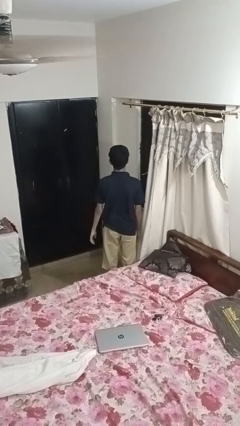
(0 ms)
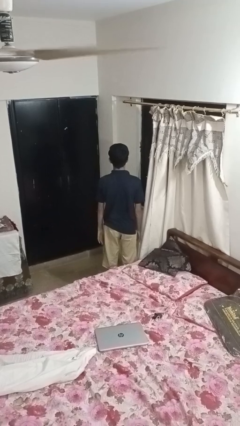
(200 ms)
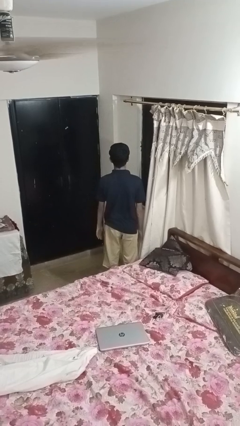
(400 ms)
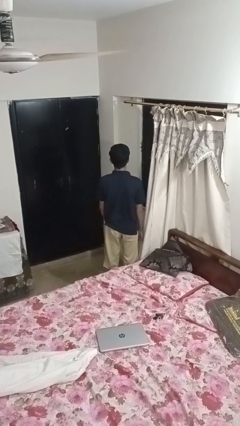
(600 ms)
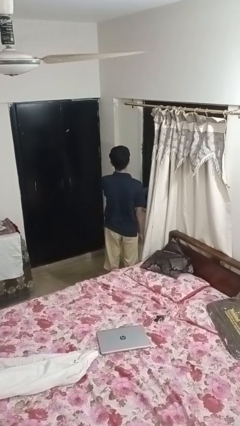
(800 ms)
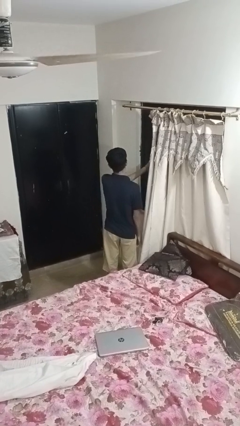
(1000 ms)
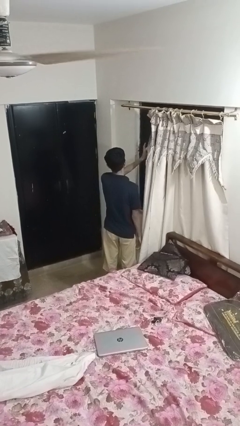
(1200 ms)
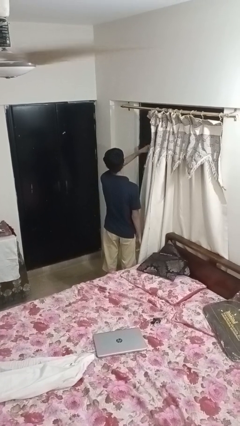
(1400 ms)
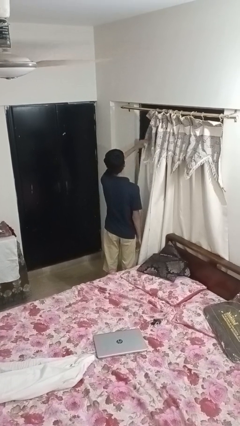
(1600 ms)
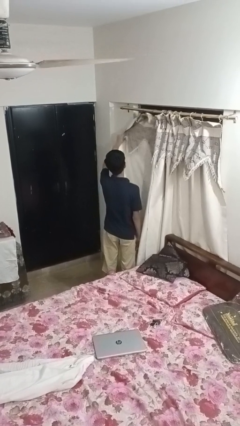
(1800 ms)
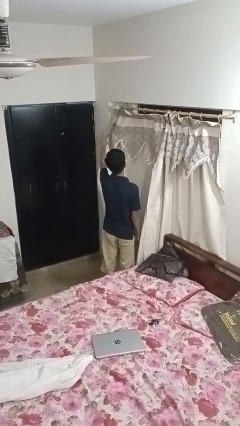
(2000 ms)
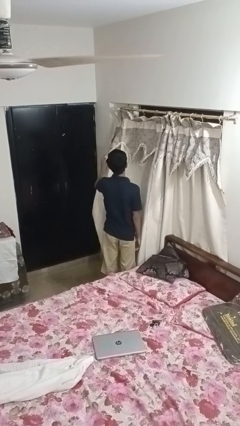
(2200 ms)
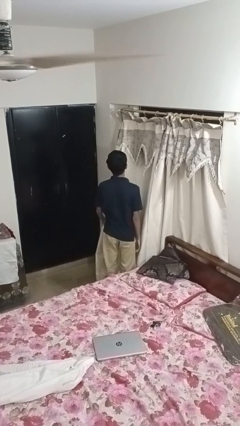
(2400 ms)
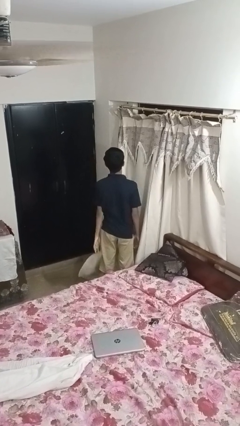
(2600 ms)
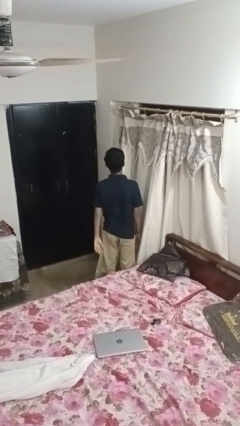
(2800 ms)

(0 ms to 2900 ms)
person closes curtains

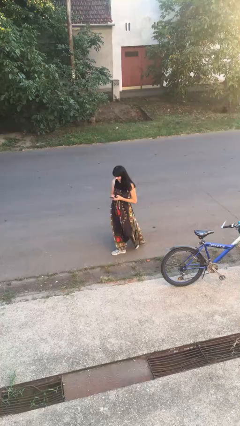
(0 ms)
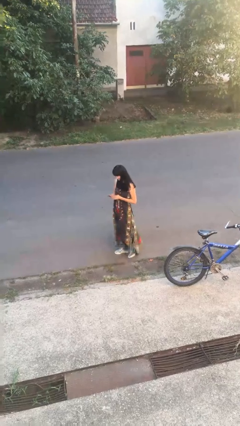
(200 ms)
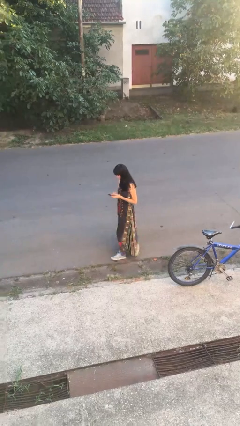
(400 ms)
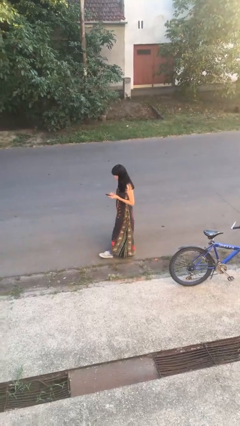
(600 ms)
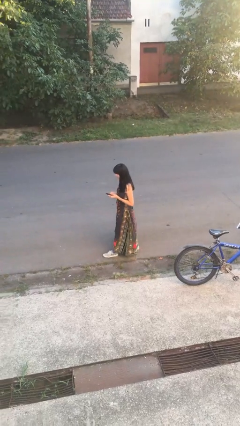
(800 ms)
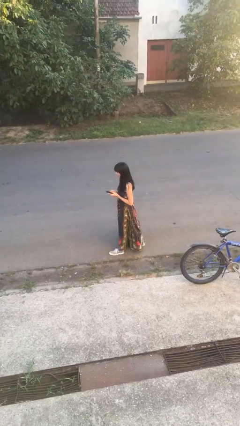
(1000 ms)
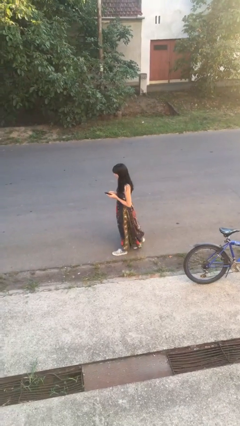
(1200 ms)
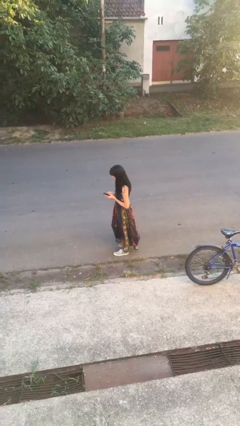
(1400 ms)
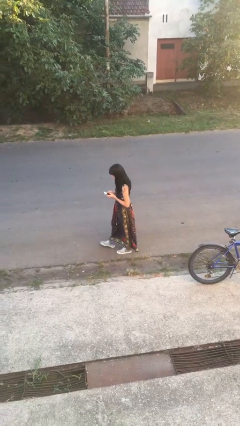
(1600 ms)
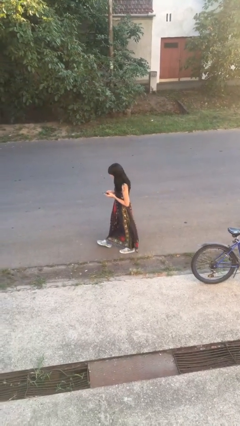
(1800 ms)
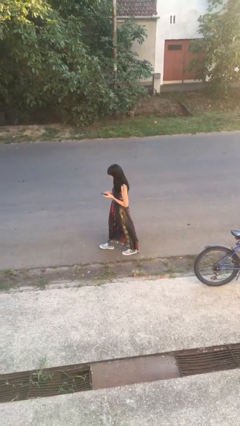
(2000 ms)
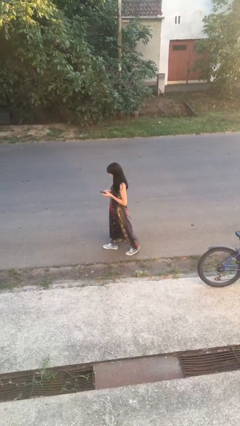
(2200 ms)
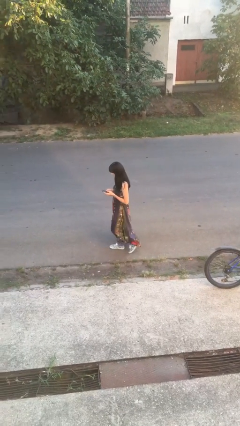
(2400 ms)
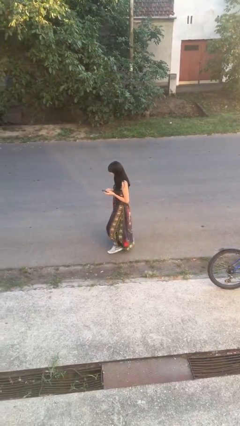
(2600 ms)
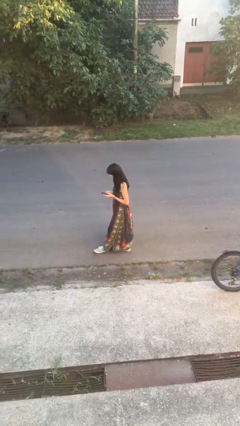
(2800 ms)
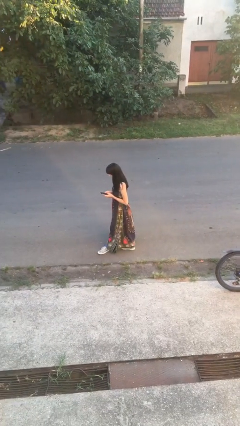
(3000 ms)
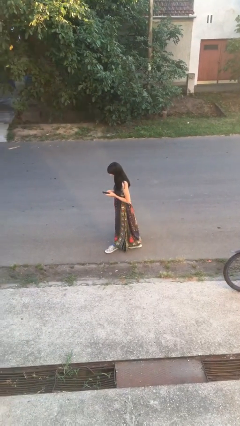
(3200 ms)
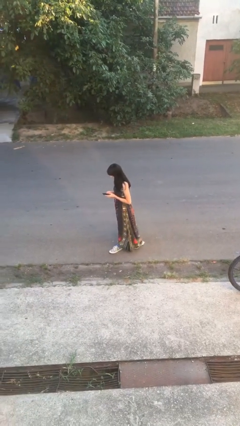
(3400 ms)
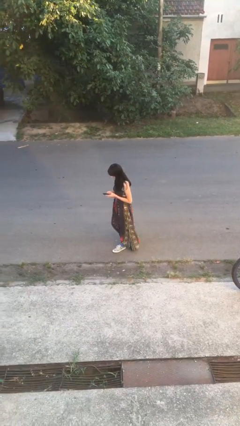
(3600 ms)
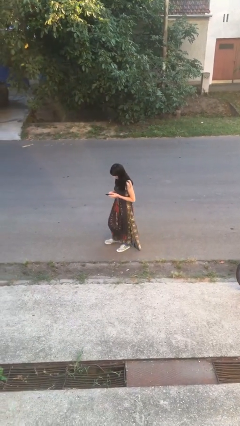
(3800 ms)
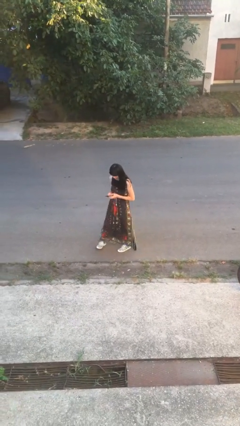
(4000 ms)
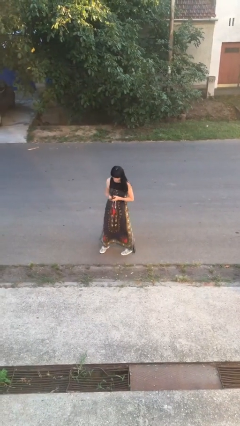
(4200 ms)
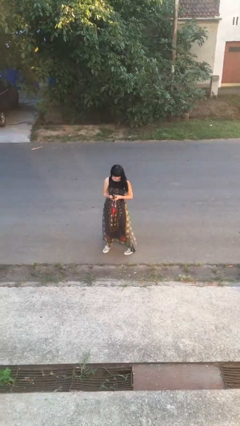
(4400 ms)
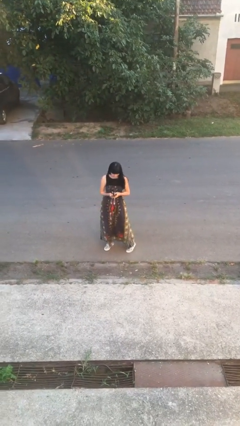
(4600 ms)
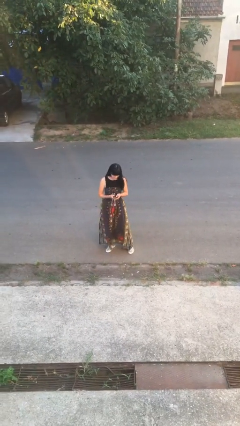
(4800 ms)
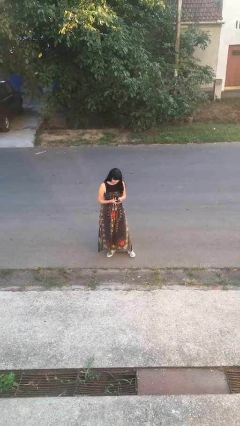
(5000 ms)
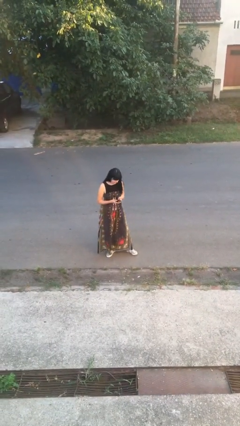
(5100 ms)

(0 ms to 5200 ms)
person texts on phone

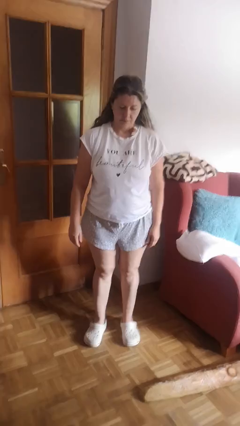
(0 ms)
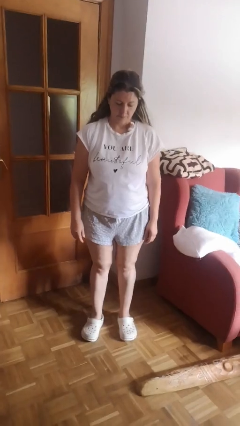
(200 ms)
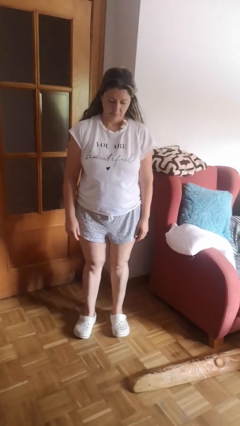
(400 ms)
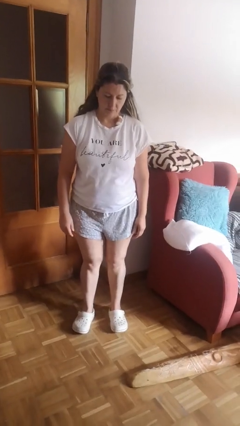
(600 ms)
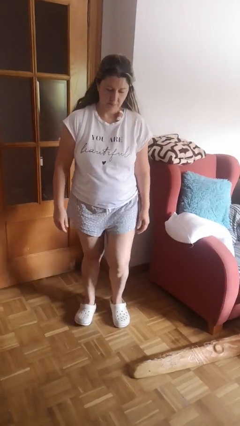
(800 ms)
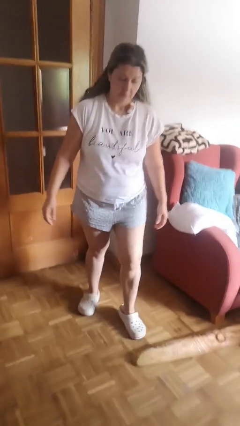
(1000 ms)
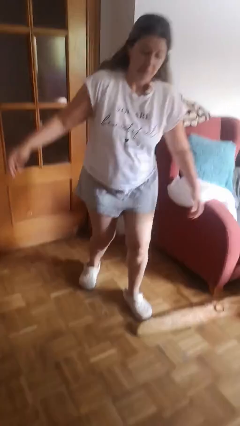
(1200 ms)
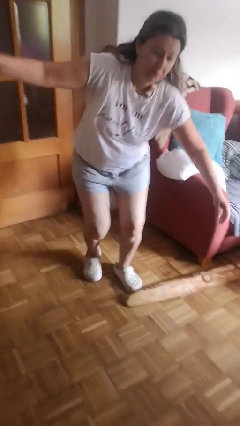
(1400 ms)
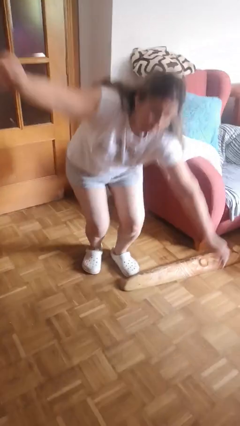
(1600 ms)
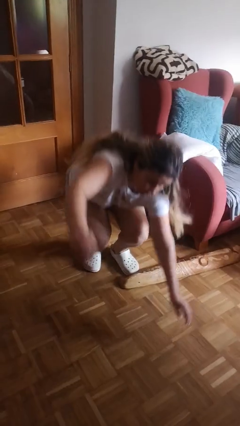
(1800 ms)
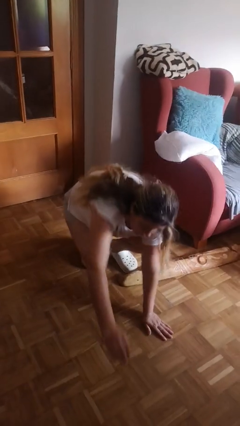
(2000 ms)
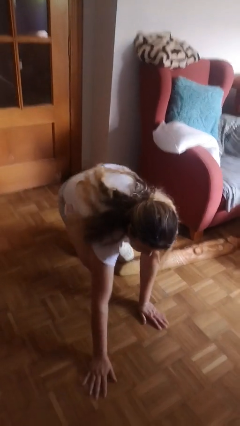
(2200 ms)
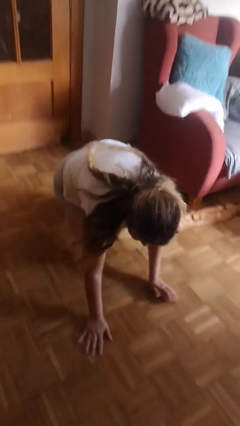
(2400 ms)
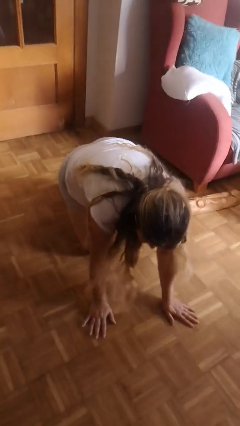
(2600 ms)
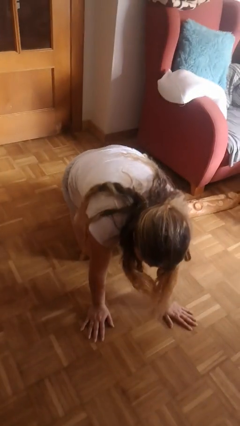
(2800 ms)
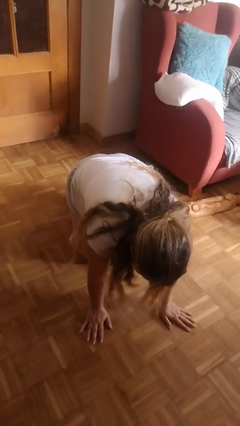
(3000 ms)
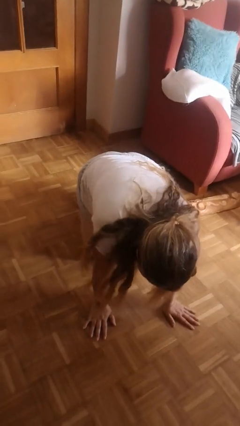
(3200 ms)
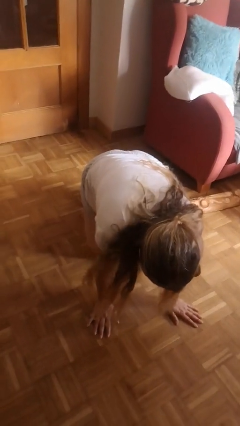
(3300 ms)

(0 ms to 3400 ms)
person trips on object on floor

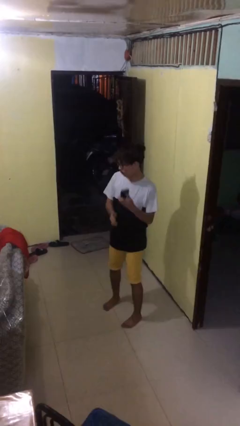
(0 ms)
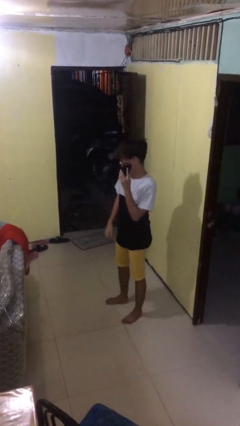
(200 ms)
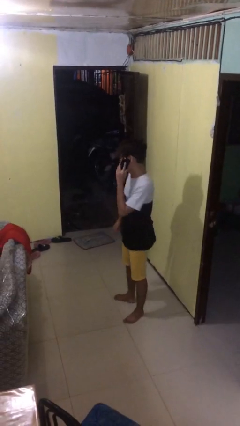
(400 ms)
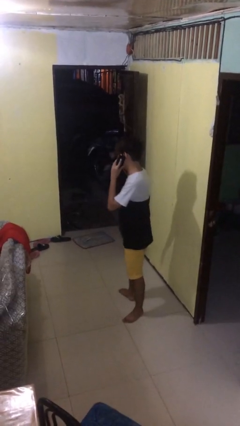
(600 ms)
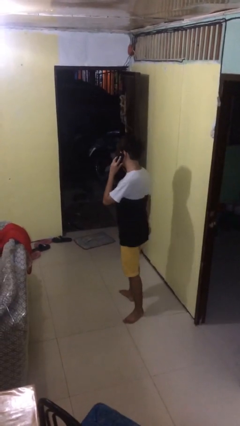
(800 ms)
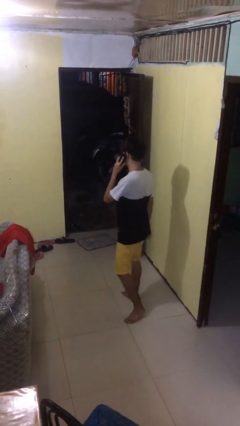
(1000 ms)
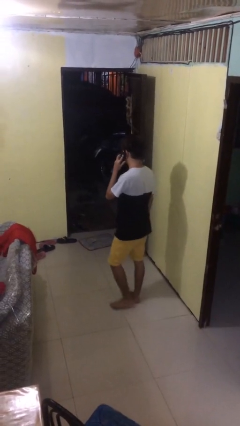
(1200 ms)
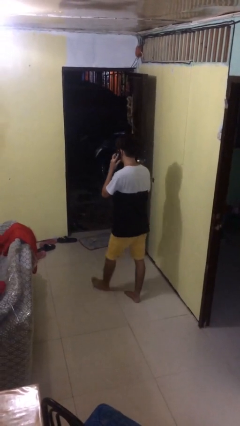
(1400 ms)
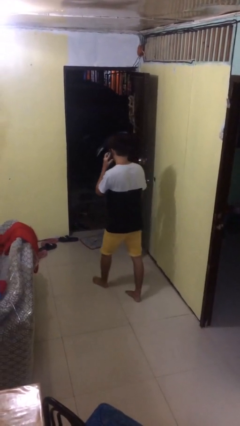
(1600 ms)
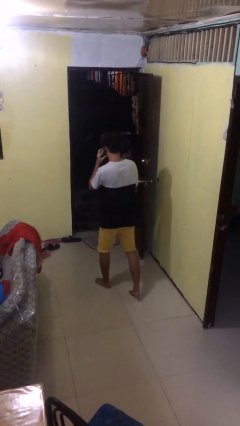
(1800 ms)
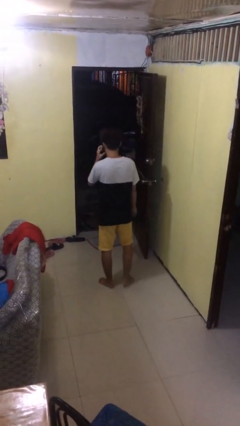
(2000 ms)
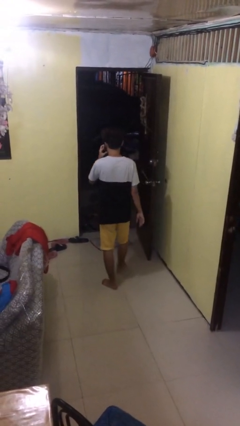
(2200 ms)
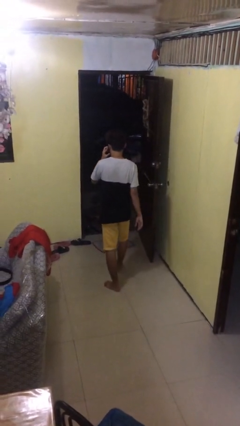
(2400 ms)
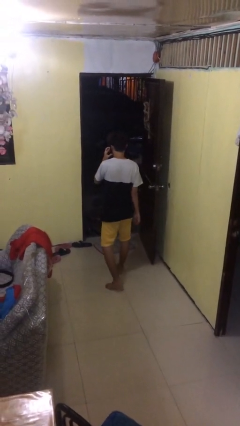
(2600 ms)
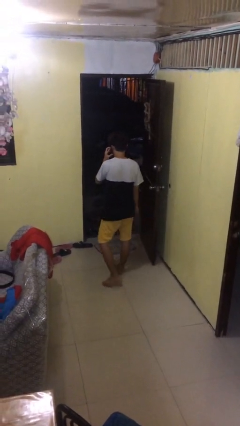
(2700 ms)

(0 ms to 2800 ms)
person talks on phone

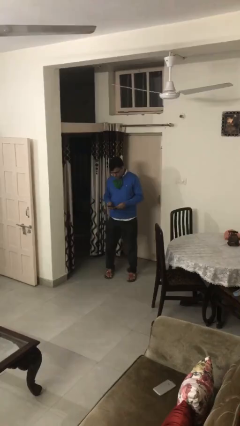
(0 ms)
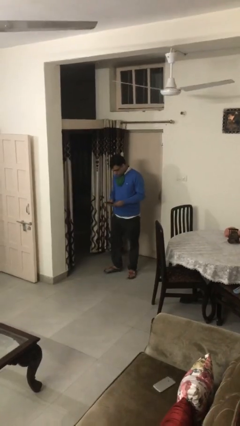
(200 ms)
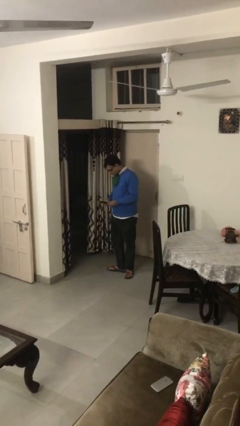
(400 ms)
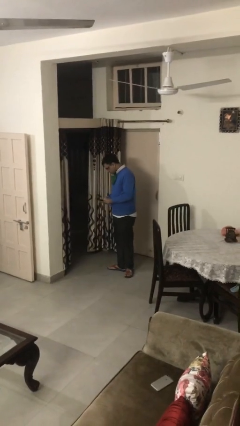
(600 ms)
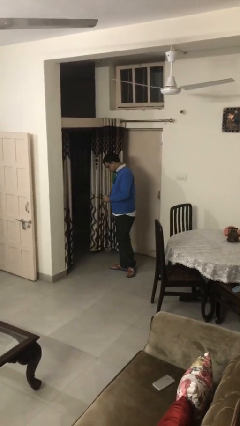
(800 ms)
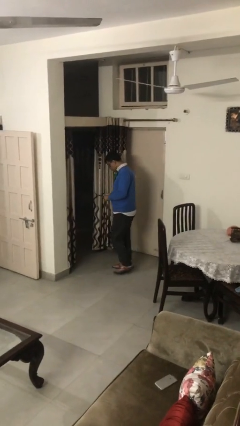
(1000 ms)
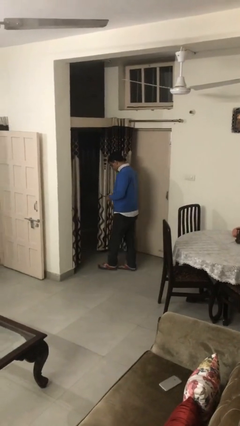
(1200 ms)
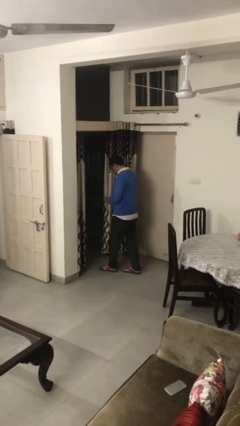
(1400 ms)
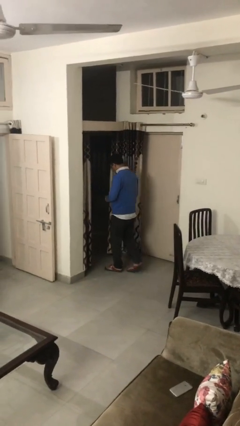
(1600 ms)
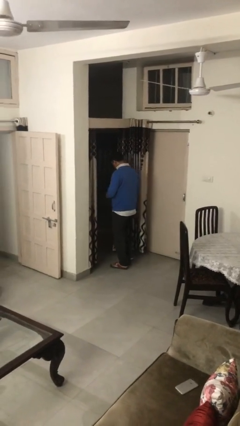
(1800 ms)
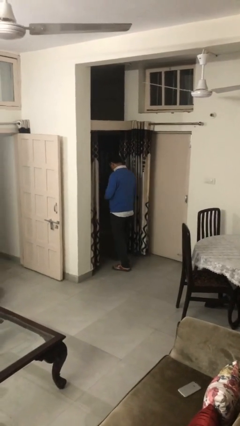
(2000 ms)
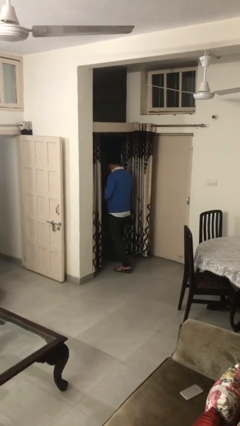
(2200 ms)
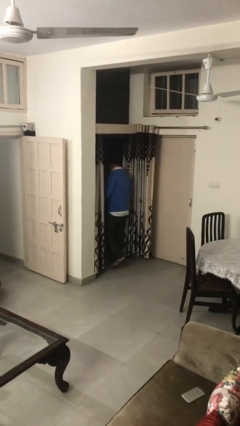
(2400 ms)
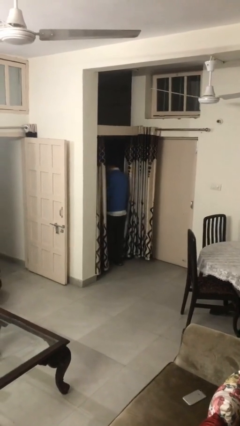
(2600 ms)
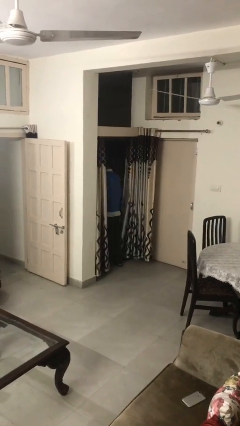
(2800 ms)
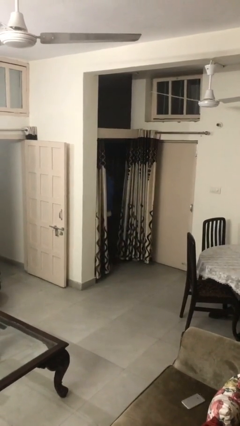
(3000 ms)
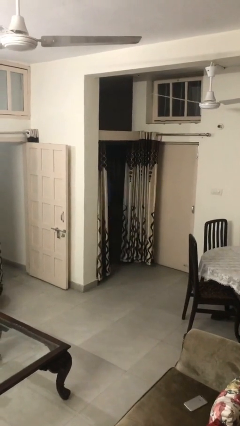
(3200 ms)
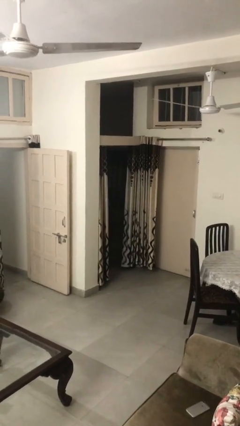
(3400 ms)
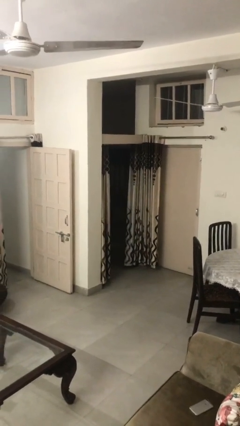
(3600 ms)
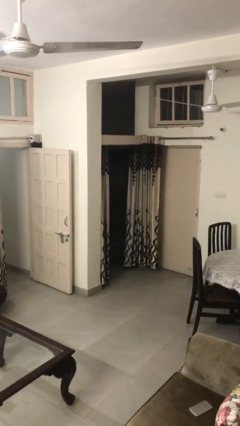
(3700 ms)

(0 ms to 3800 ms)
person exits scene through structure
